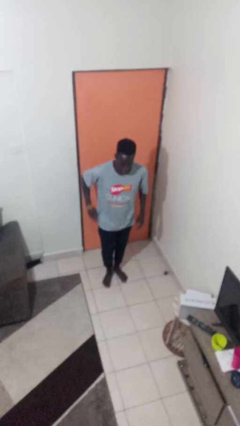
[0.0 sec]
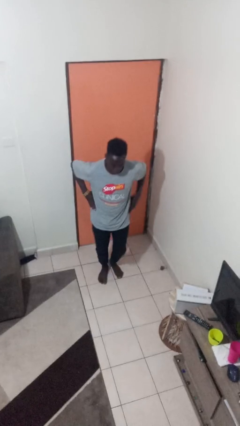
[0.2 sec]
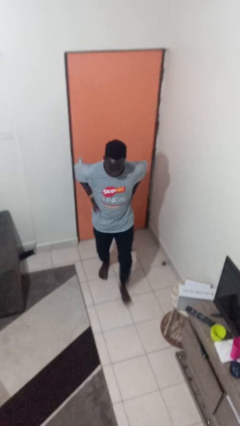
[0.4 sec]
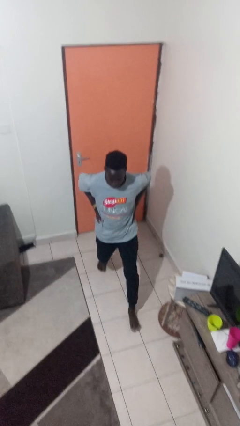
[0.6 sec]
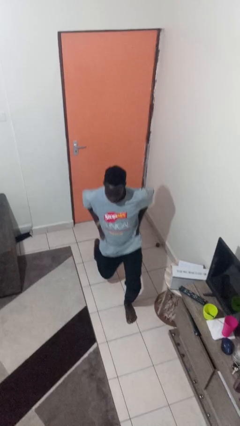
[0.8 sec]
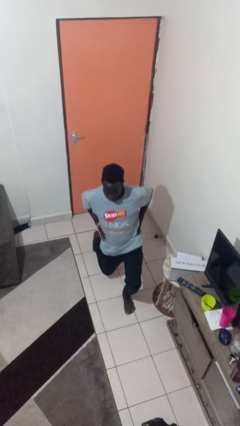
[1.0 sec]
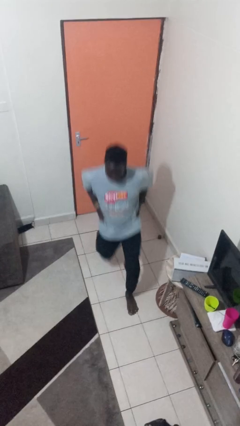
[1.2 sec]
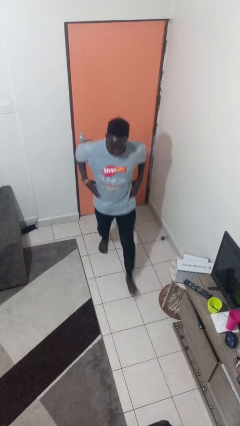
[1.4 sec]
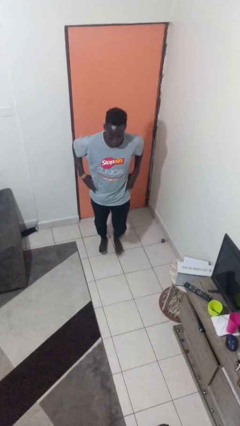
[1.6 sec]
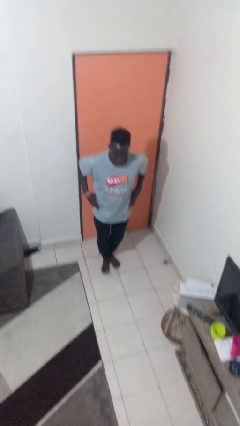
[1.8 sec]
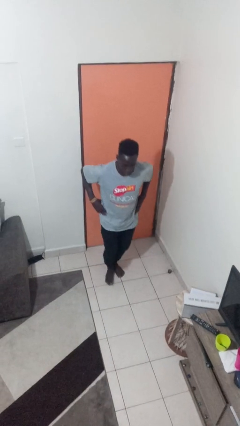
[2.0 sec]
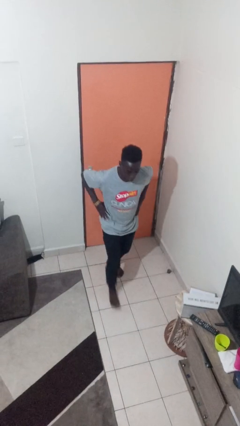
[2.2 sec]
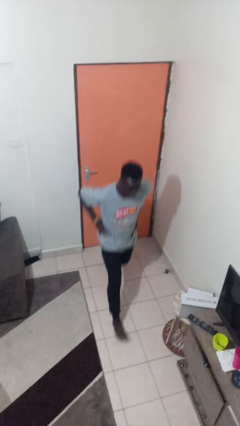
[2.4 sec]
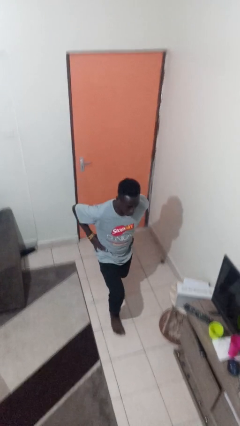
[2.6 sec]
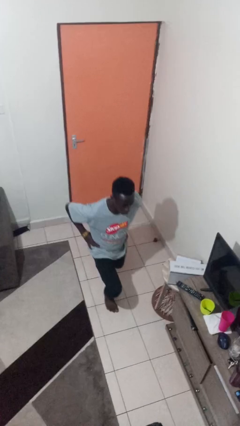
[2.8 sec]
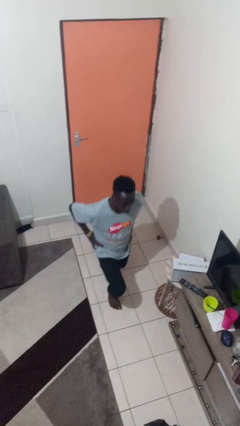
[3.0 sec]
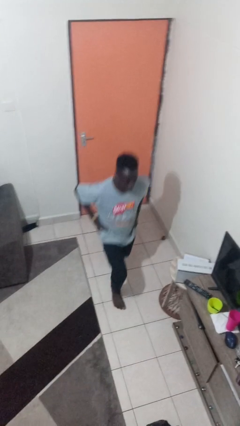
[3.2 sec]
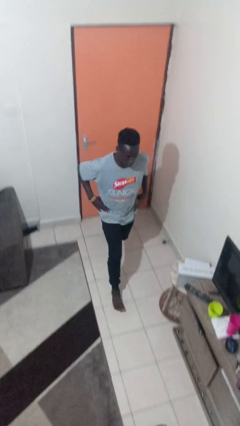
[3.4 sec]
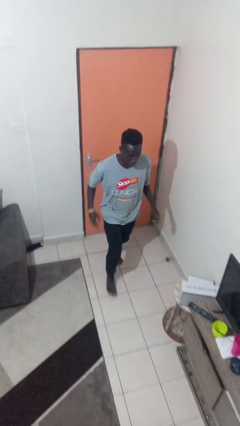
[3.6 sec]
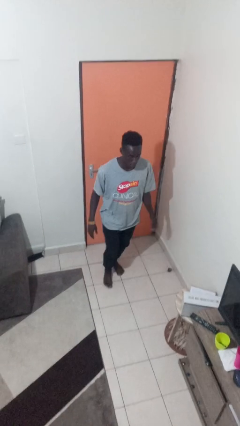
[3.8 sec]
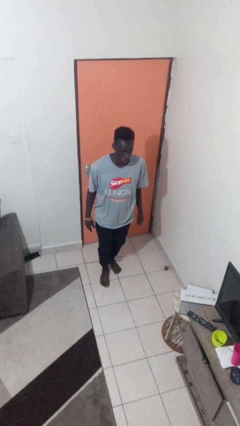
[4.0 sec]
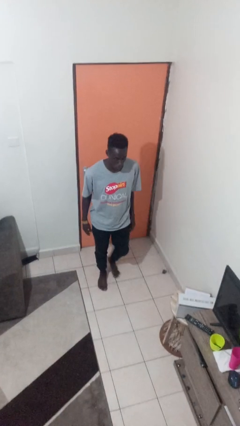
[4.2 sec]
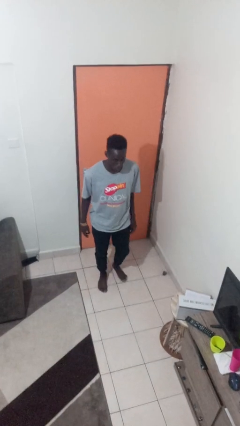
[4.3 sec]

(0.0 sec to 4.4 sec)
person exercises with lunges

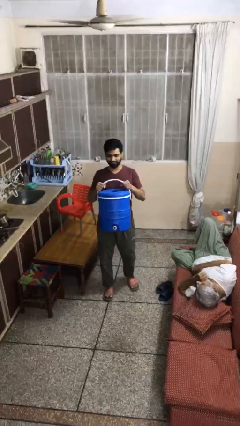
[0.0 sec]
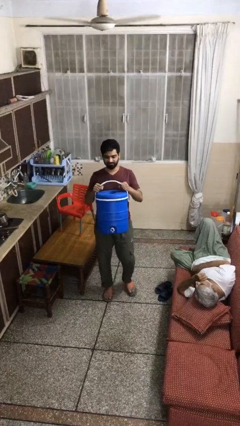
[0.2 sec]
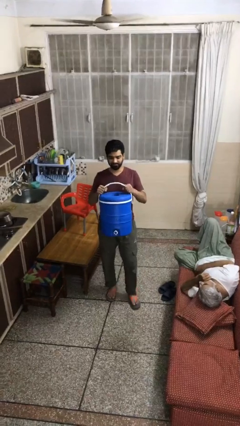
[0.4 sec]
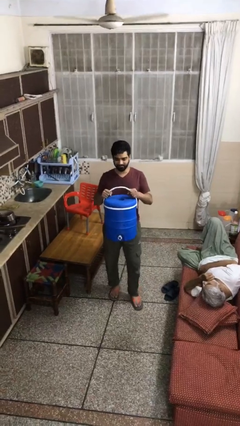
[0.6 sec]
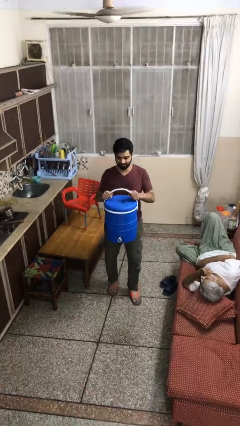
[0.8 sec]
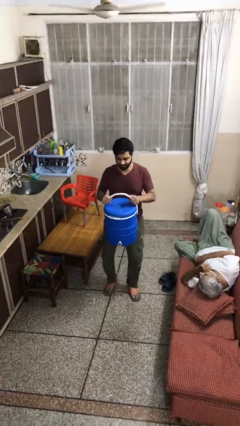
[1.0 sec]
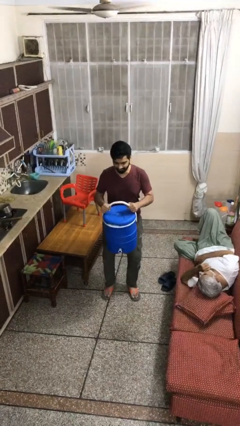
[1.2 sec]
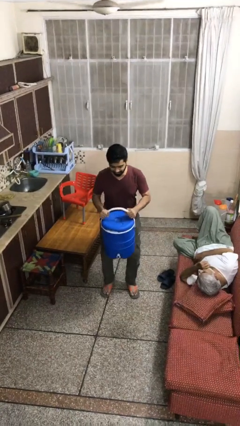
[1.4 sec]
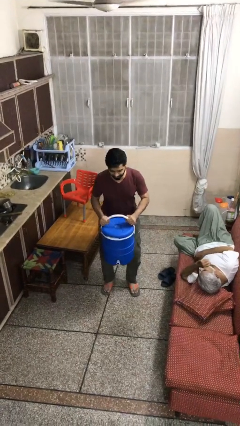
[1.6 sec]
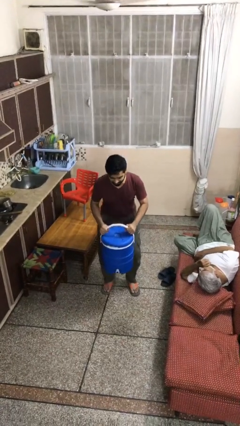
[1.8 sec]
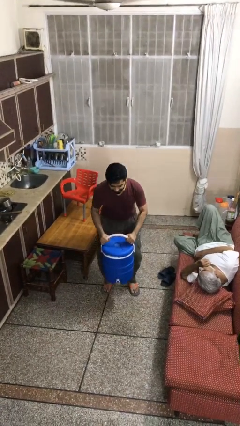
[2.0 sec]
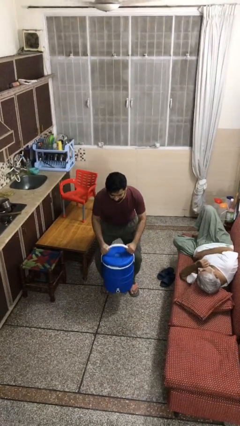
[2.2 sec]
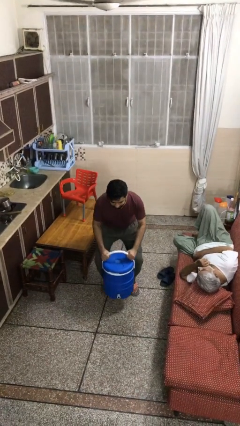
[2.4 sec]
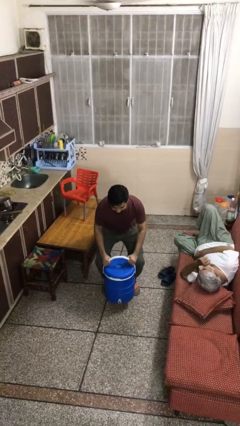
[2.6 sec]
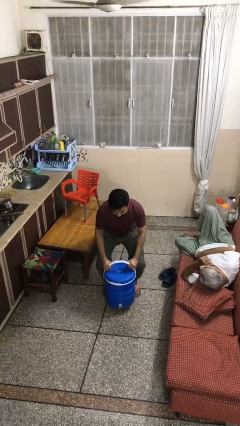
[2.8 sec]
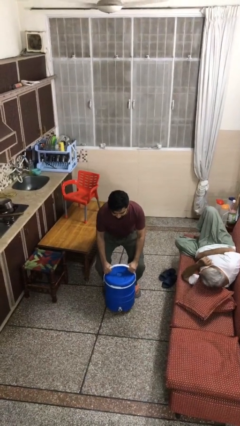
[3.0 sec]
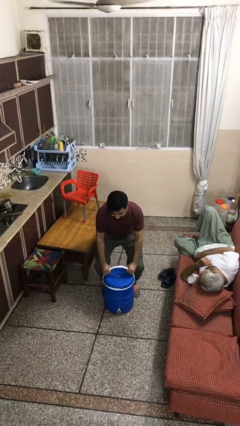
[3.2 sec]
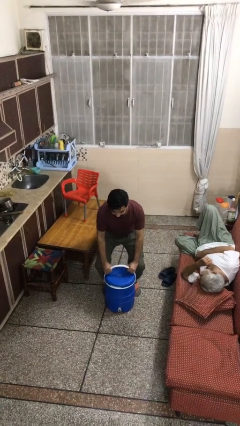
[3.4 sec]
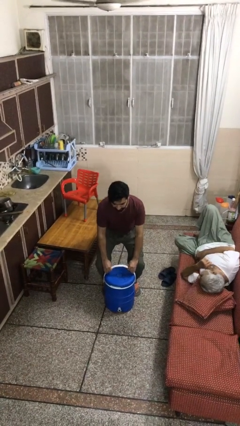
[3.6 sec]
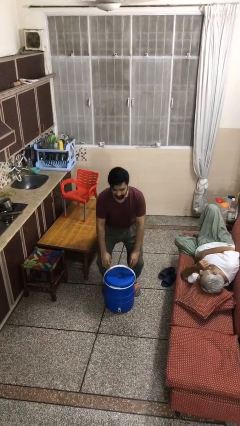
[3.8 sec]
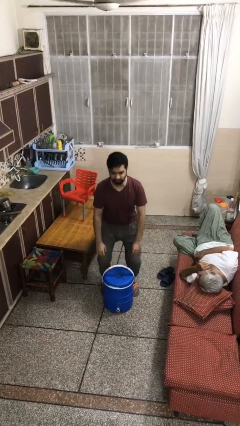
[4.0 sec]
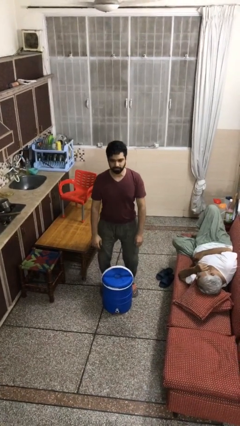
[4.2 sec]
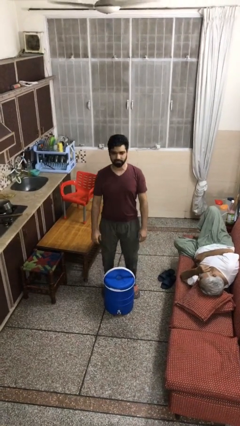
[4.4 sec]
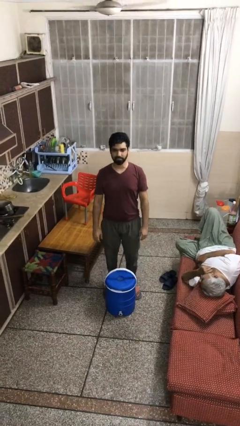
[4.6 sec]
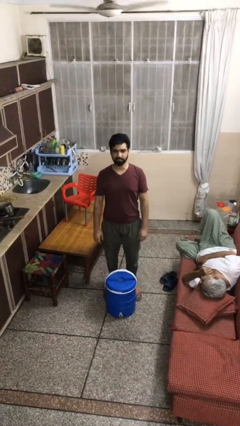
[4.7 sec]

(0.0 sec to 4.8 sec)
person puts down object on floor

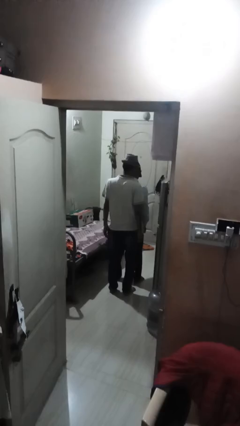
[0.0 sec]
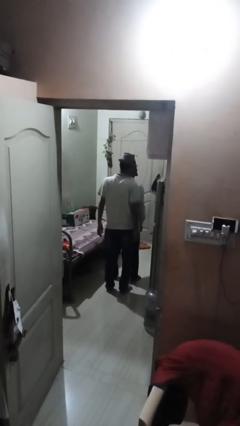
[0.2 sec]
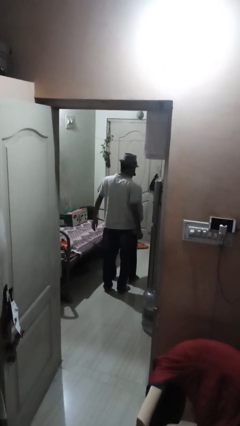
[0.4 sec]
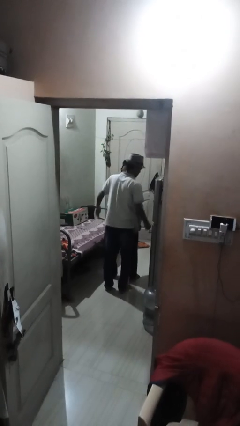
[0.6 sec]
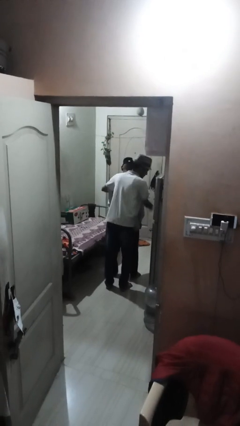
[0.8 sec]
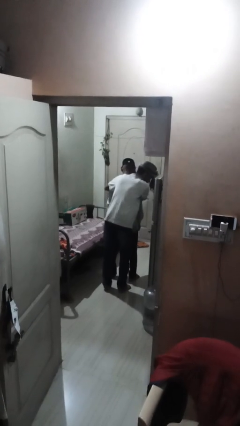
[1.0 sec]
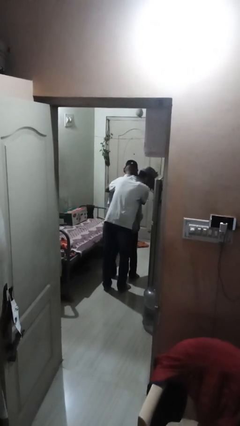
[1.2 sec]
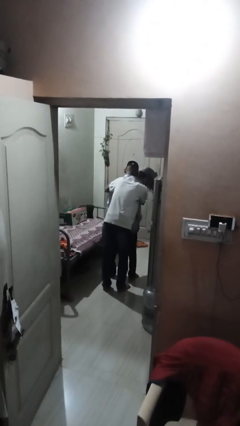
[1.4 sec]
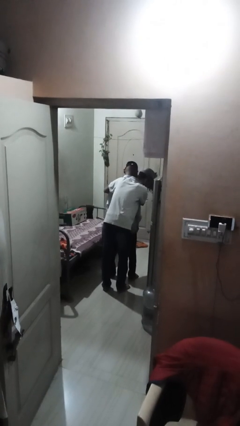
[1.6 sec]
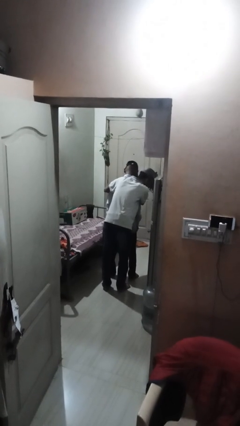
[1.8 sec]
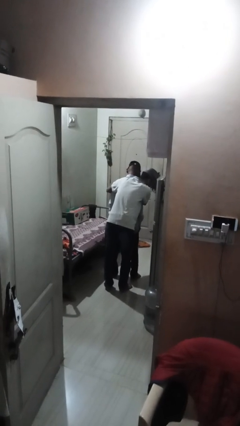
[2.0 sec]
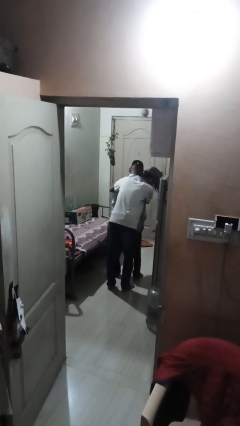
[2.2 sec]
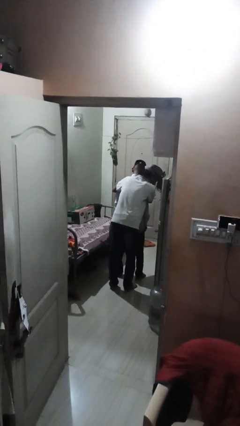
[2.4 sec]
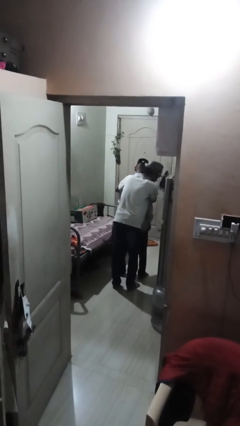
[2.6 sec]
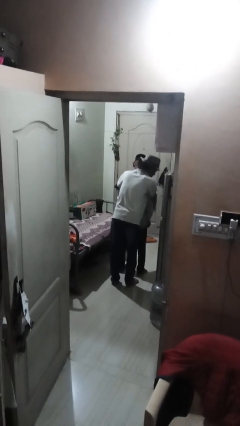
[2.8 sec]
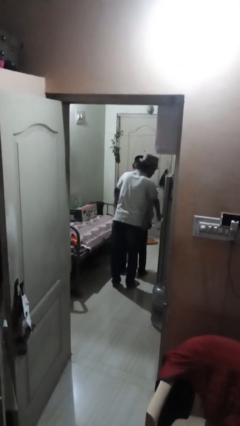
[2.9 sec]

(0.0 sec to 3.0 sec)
person hugs person from behind

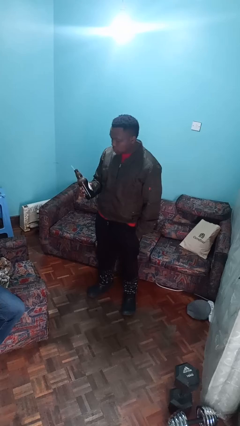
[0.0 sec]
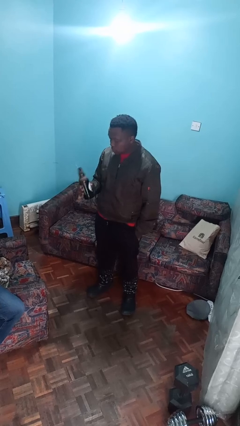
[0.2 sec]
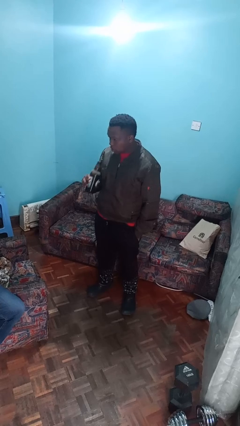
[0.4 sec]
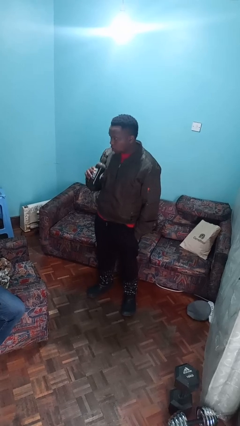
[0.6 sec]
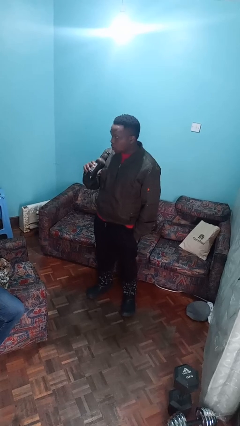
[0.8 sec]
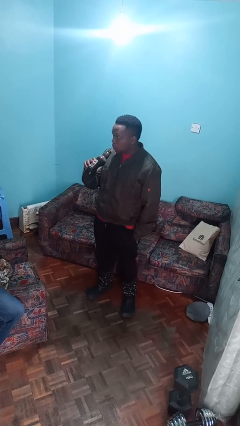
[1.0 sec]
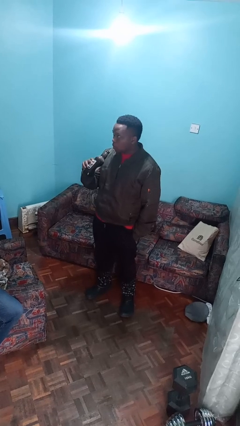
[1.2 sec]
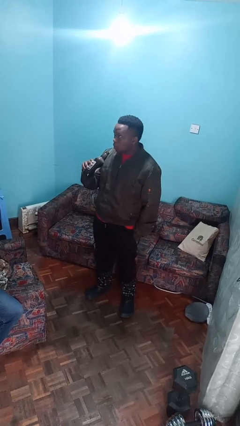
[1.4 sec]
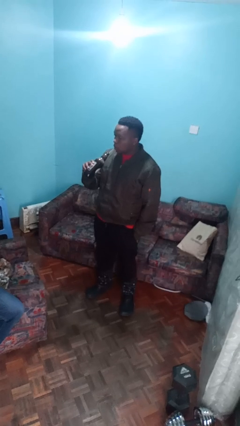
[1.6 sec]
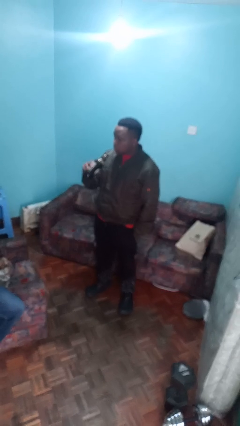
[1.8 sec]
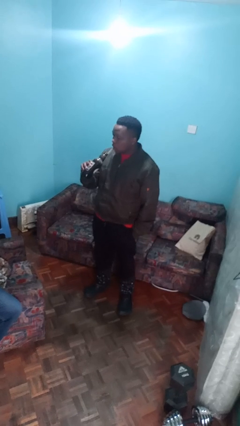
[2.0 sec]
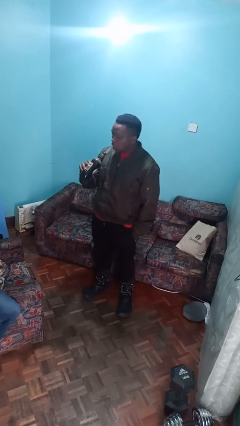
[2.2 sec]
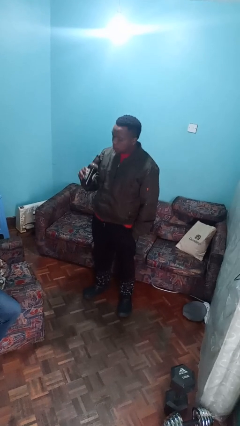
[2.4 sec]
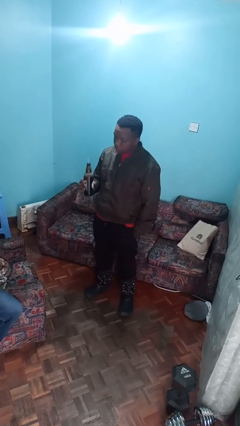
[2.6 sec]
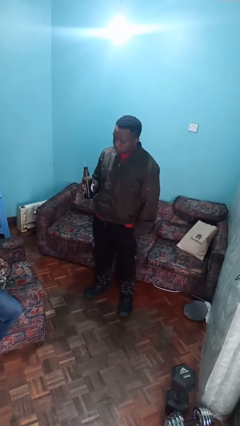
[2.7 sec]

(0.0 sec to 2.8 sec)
person drinks from straw

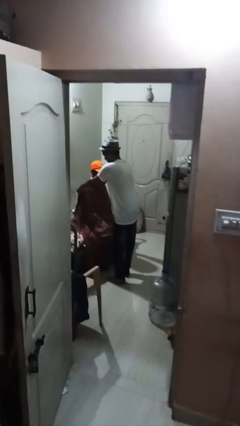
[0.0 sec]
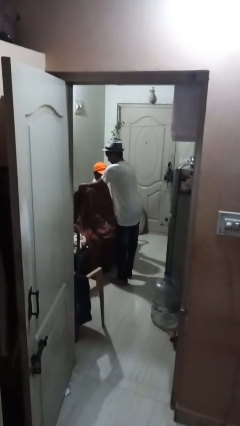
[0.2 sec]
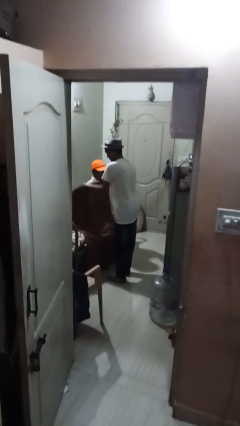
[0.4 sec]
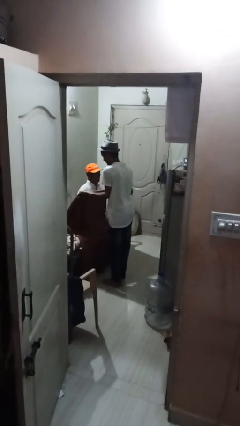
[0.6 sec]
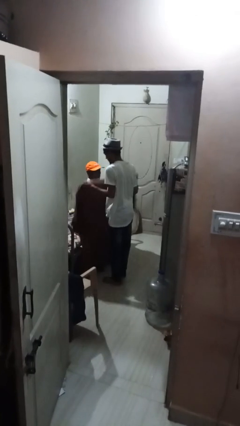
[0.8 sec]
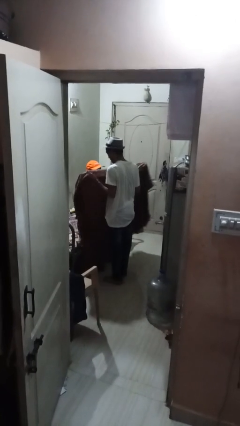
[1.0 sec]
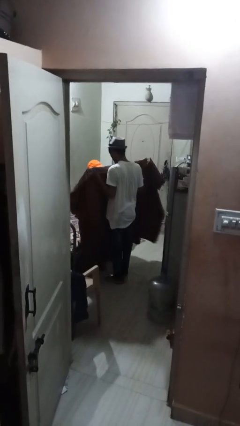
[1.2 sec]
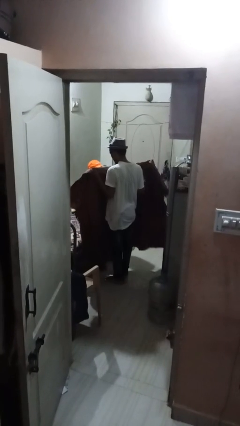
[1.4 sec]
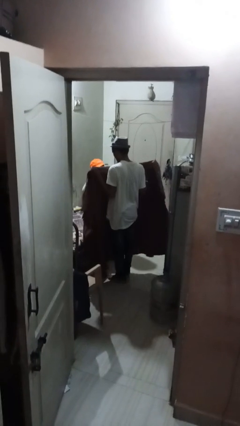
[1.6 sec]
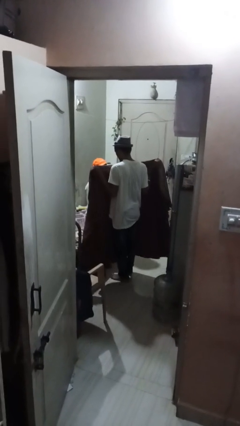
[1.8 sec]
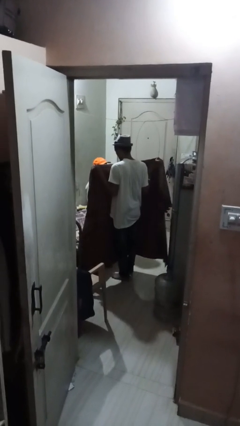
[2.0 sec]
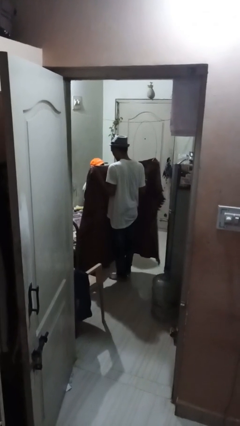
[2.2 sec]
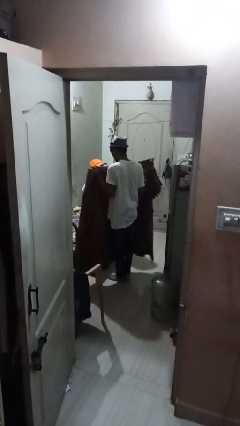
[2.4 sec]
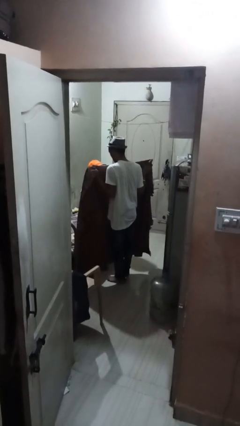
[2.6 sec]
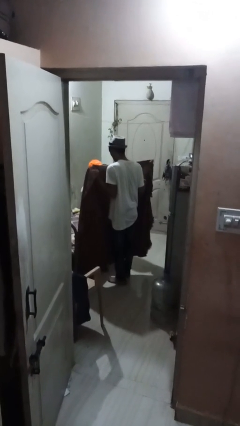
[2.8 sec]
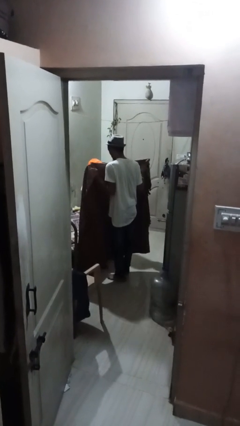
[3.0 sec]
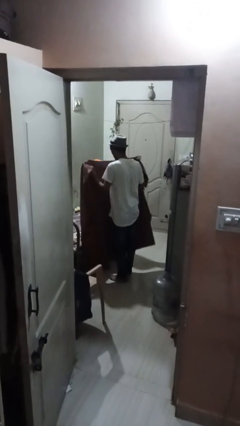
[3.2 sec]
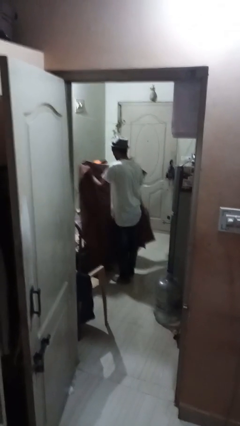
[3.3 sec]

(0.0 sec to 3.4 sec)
person uncovers friend with blanket
